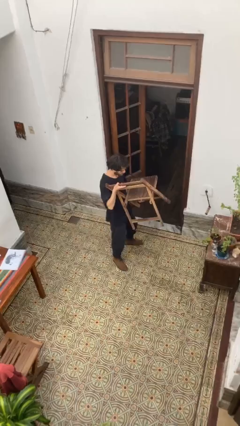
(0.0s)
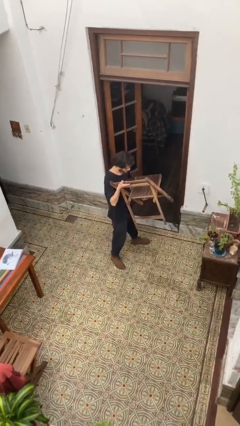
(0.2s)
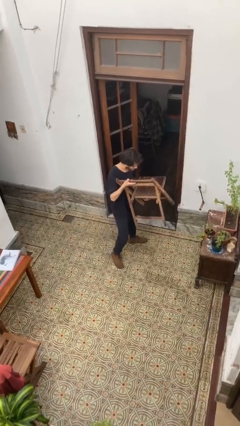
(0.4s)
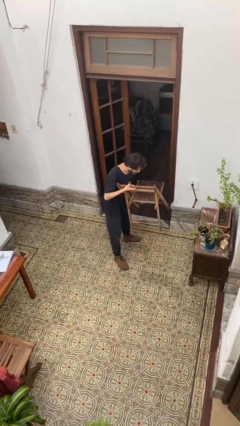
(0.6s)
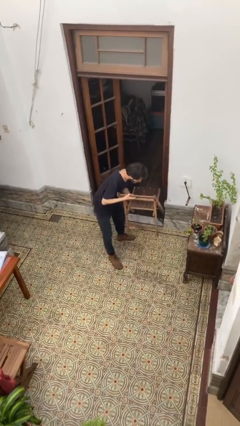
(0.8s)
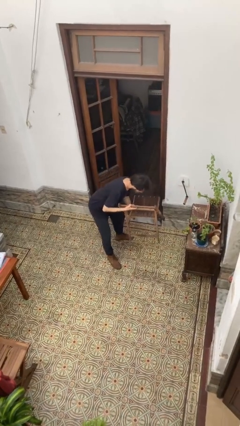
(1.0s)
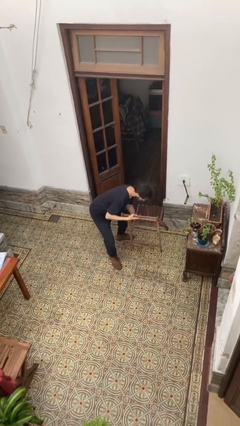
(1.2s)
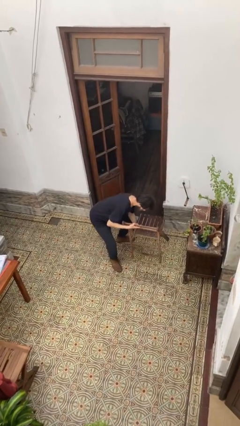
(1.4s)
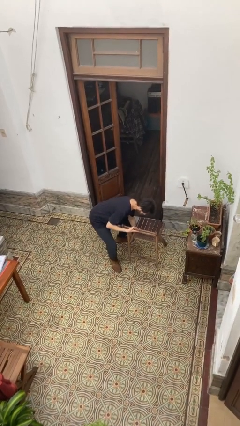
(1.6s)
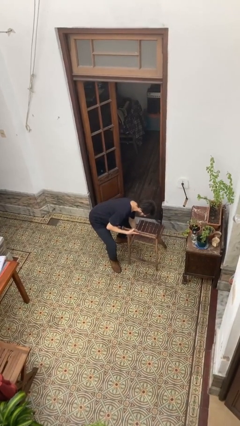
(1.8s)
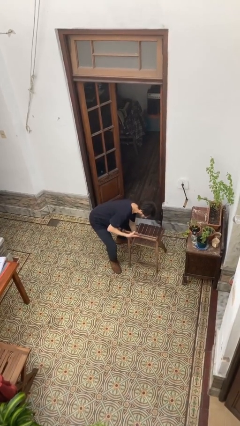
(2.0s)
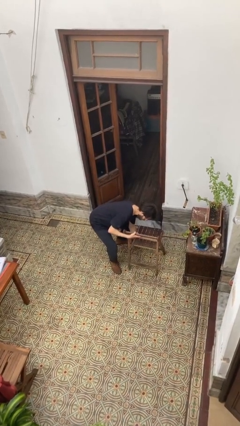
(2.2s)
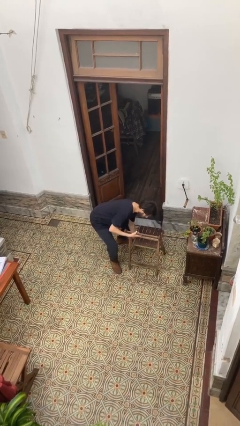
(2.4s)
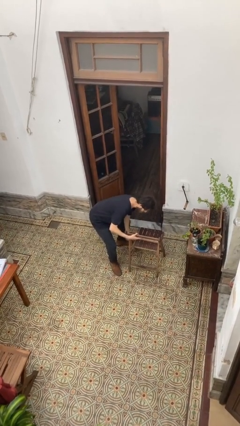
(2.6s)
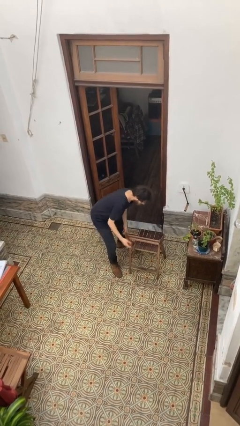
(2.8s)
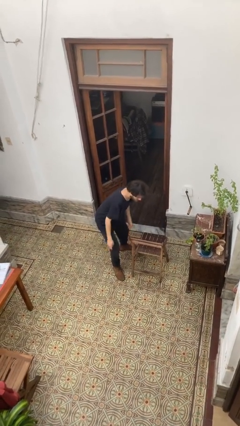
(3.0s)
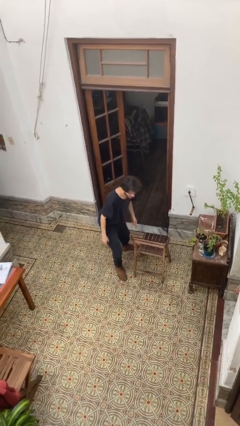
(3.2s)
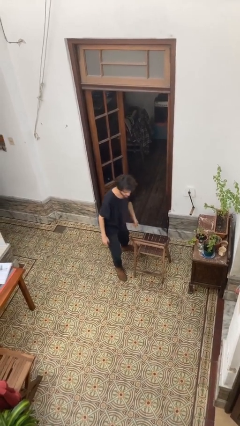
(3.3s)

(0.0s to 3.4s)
person puts down object on floor

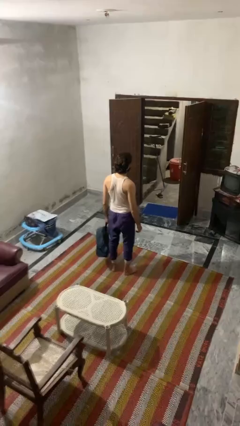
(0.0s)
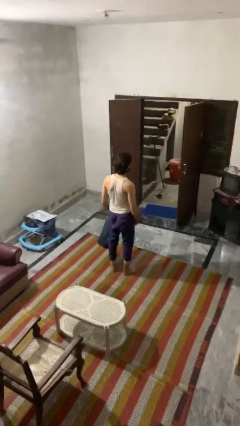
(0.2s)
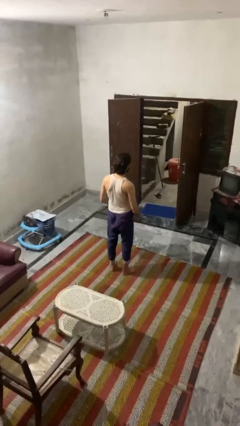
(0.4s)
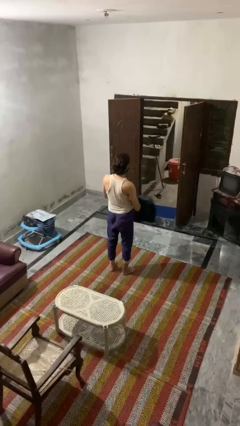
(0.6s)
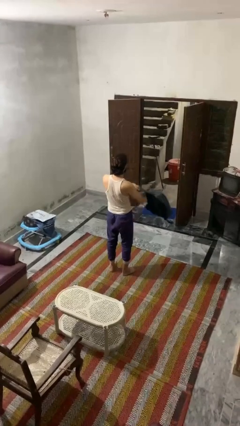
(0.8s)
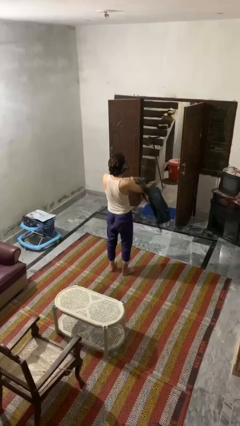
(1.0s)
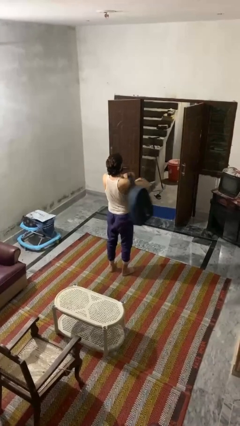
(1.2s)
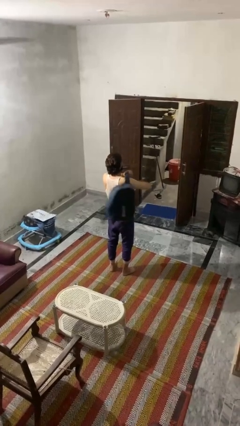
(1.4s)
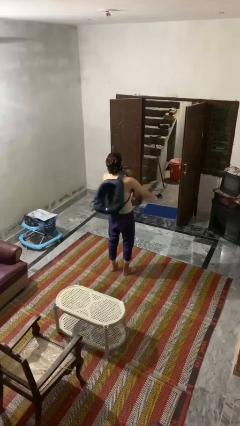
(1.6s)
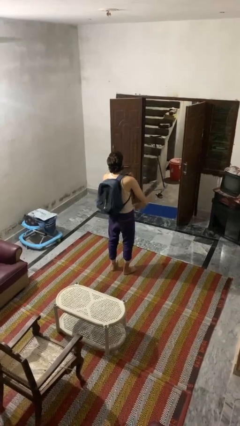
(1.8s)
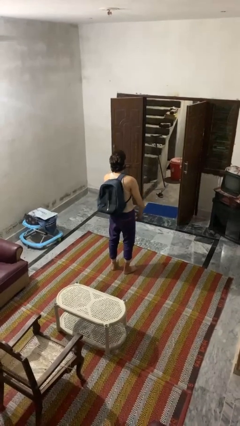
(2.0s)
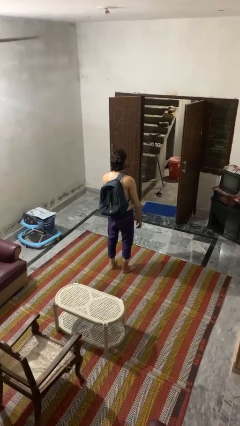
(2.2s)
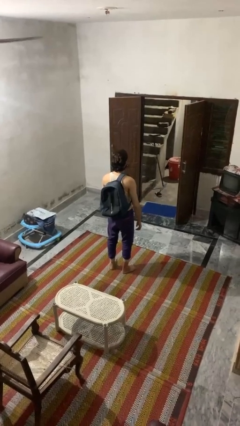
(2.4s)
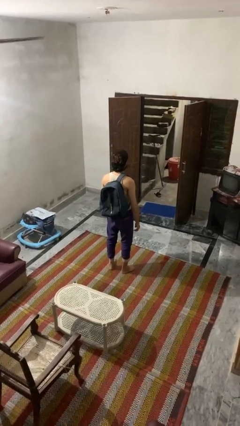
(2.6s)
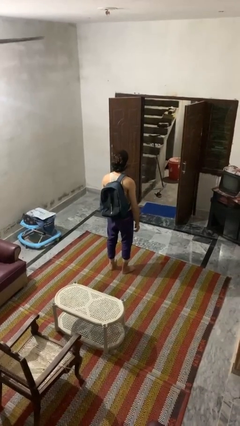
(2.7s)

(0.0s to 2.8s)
person puts on backpack

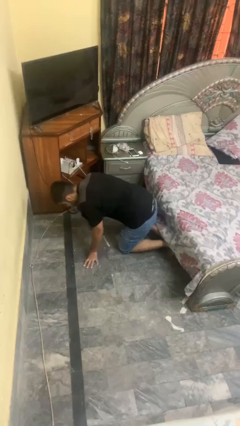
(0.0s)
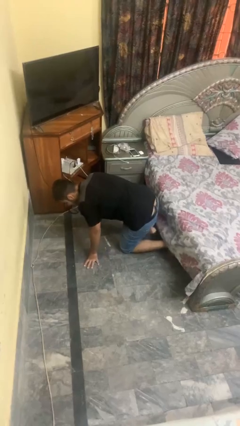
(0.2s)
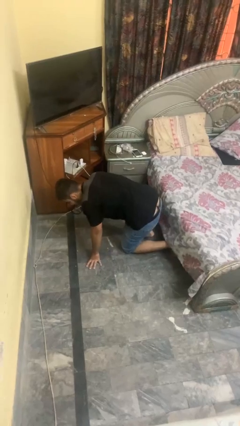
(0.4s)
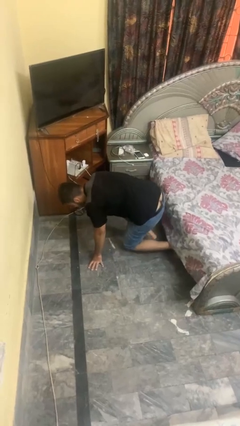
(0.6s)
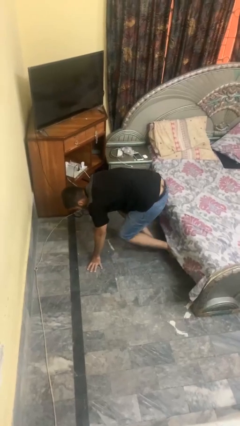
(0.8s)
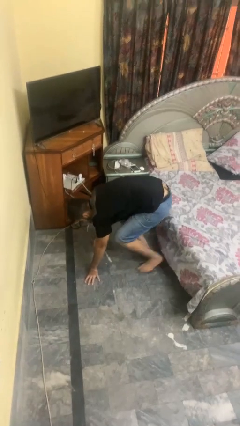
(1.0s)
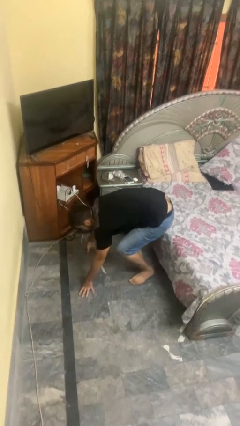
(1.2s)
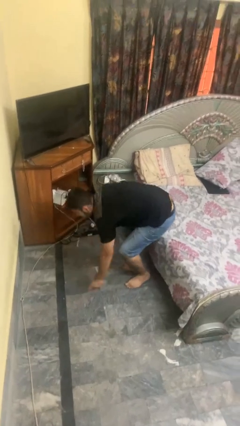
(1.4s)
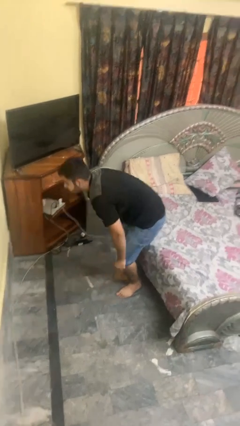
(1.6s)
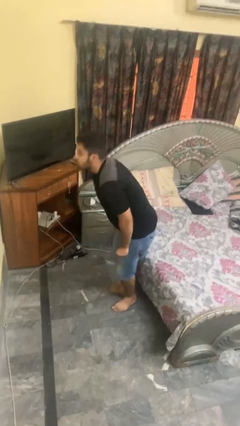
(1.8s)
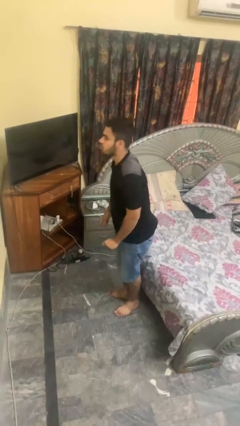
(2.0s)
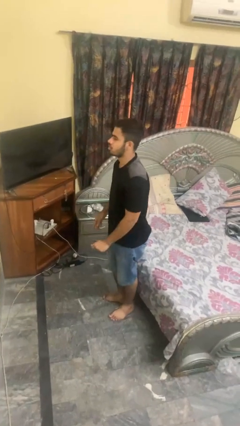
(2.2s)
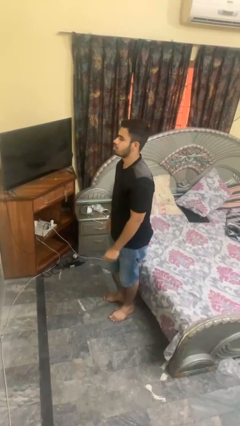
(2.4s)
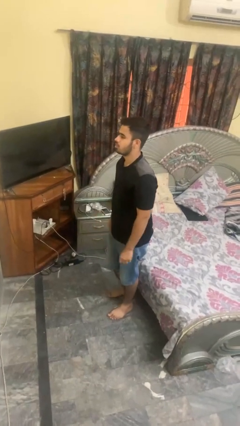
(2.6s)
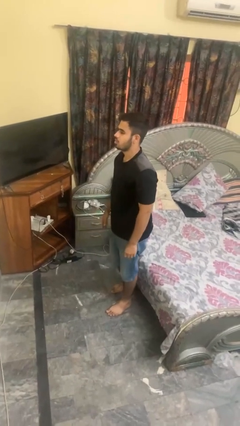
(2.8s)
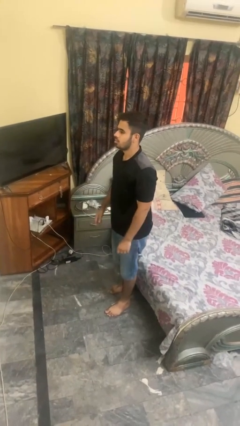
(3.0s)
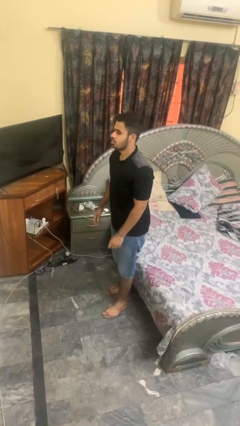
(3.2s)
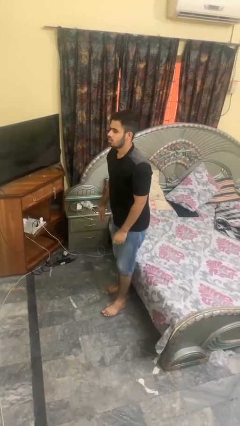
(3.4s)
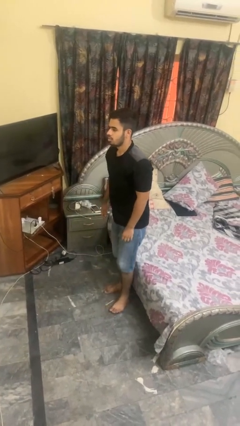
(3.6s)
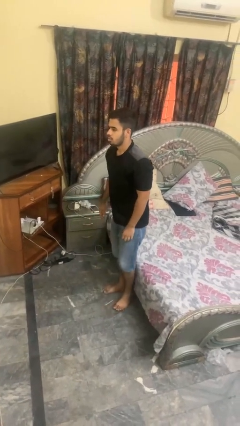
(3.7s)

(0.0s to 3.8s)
person stands up from floor

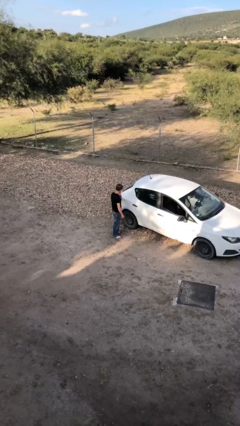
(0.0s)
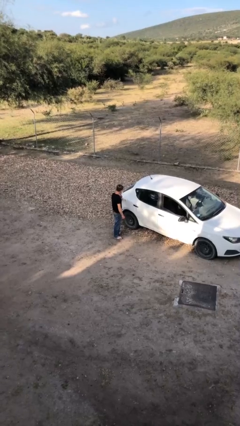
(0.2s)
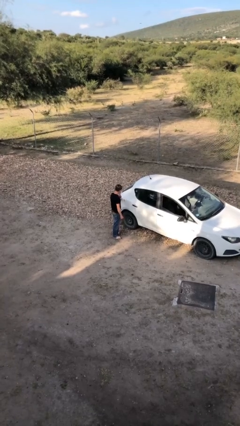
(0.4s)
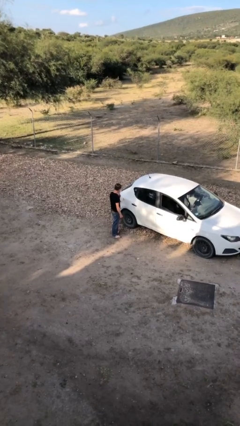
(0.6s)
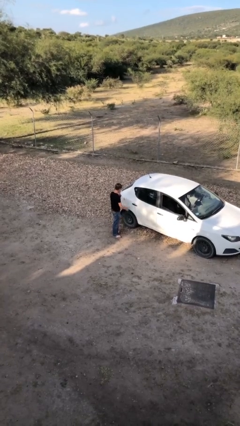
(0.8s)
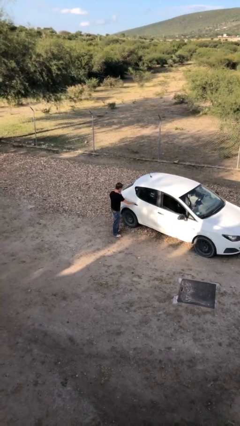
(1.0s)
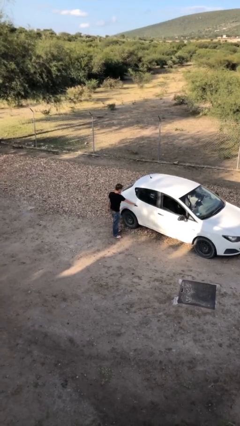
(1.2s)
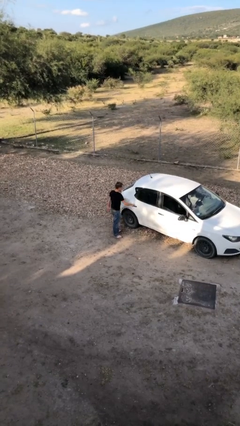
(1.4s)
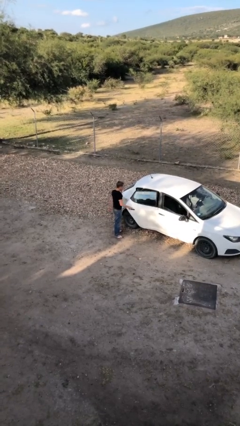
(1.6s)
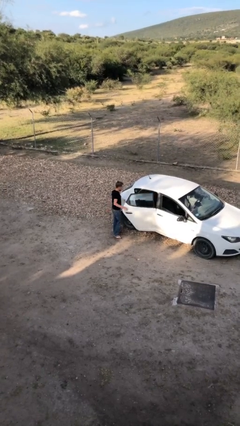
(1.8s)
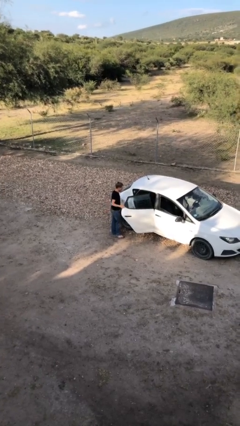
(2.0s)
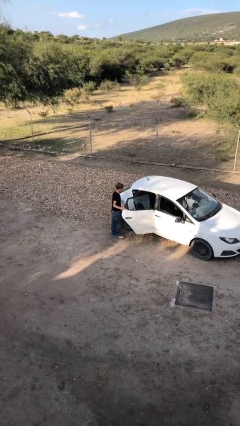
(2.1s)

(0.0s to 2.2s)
person opens car door

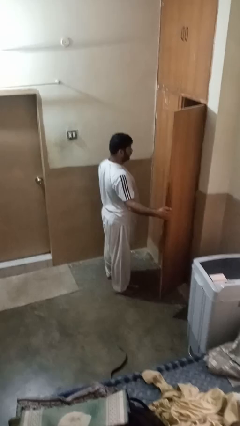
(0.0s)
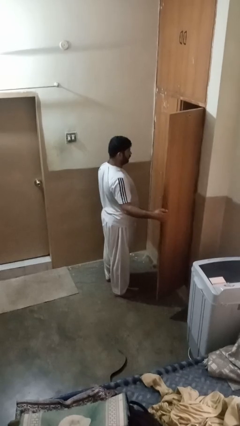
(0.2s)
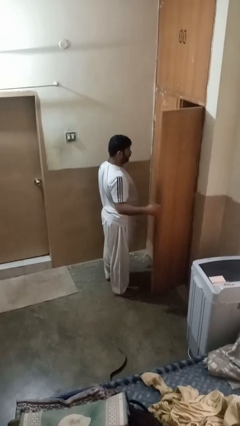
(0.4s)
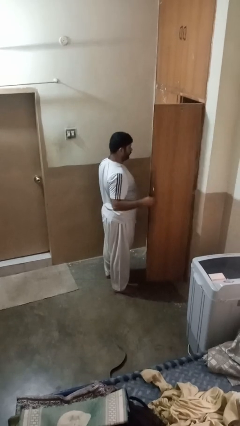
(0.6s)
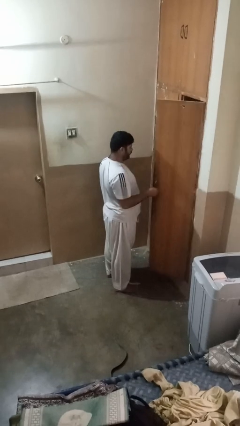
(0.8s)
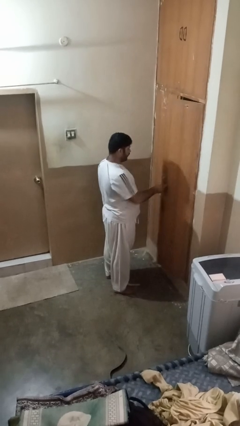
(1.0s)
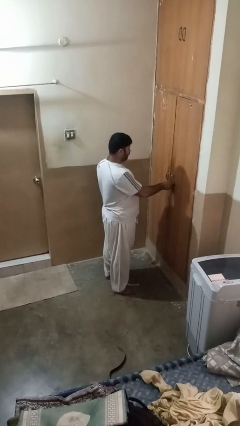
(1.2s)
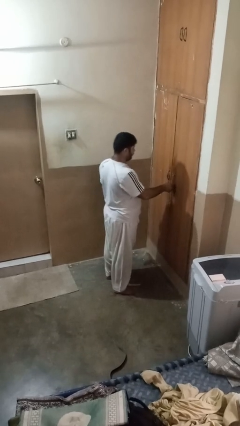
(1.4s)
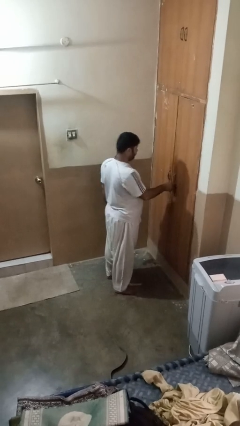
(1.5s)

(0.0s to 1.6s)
person closes closet door

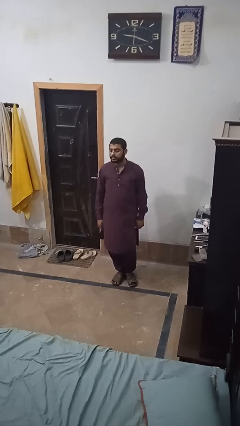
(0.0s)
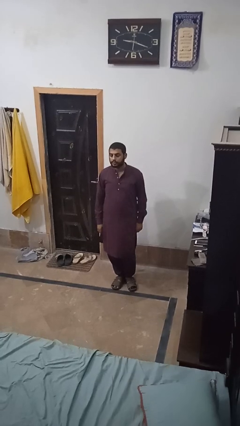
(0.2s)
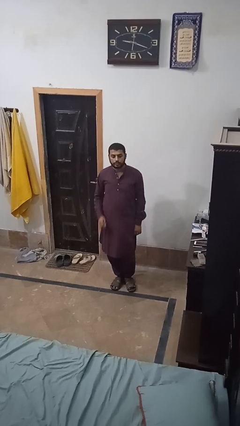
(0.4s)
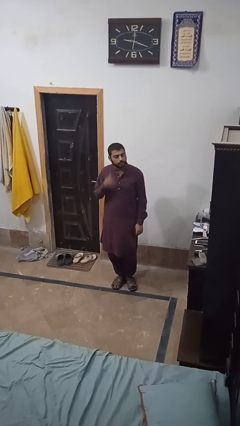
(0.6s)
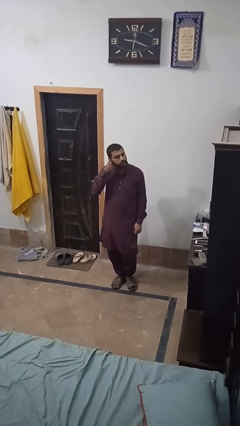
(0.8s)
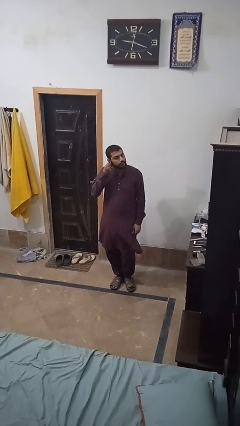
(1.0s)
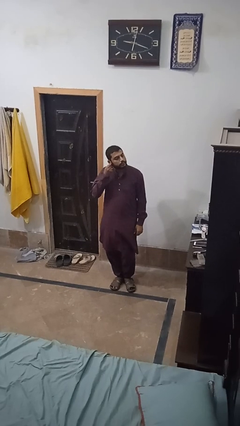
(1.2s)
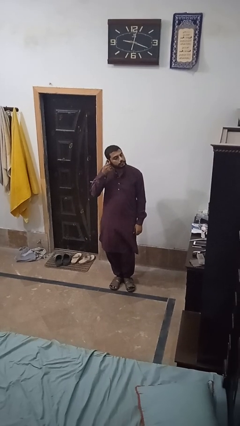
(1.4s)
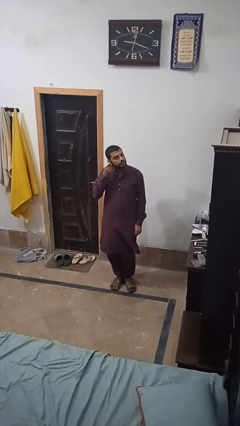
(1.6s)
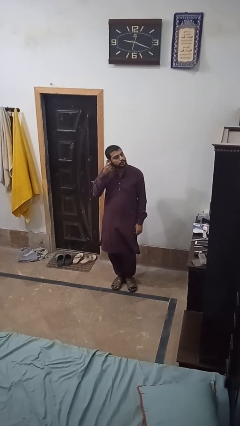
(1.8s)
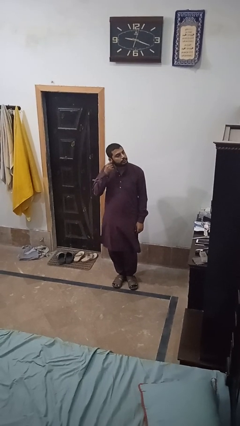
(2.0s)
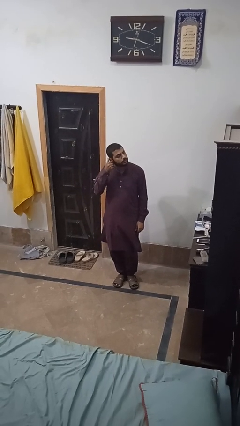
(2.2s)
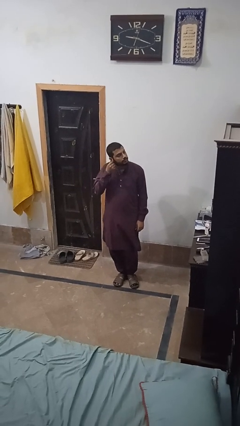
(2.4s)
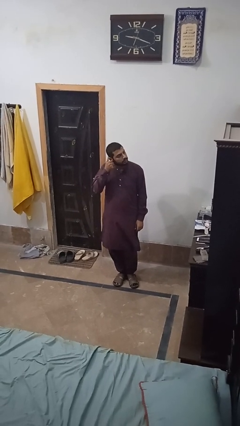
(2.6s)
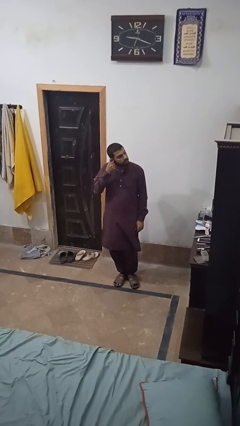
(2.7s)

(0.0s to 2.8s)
person touches earlobe

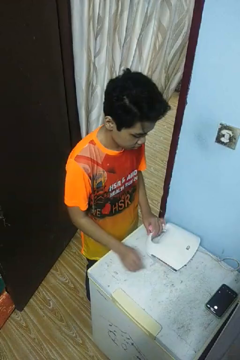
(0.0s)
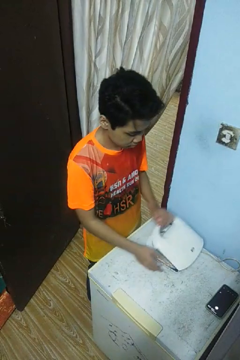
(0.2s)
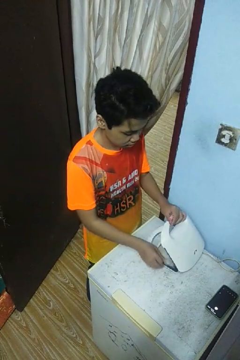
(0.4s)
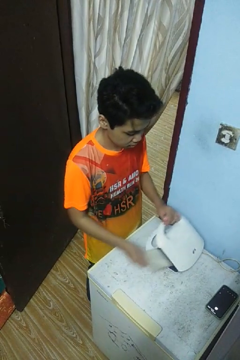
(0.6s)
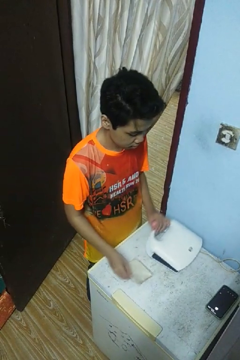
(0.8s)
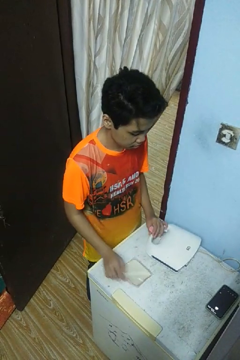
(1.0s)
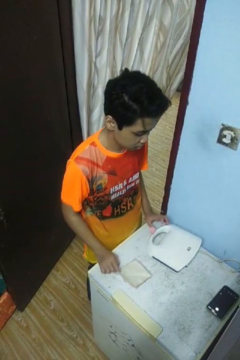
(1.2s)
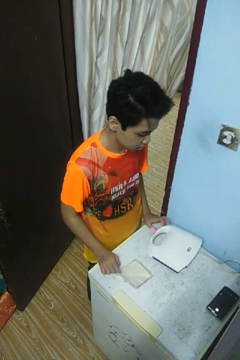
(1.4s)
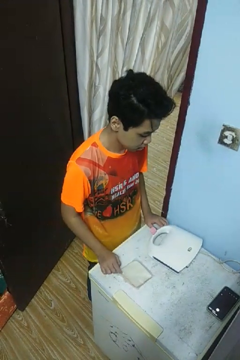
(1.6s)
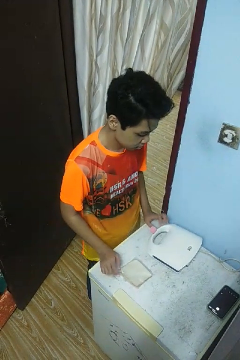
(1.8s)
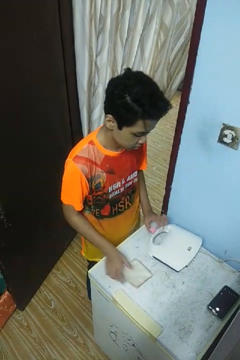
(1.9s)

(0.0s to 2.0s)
person takes object from toaster
